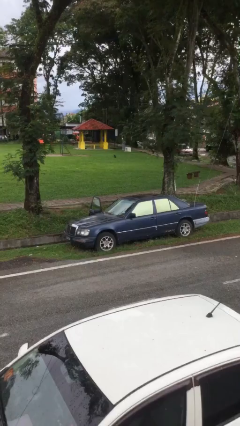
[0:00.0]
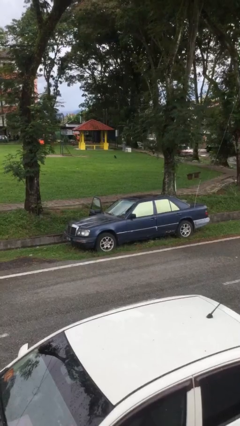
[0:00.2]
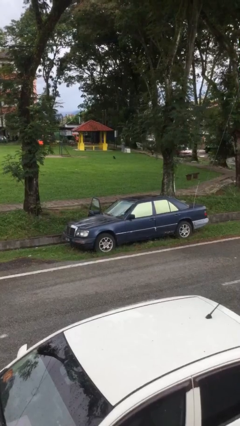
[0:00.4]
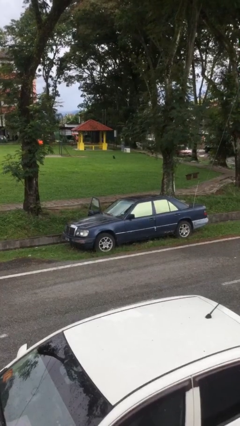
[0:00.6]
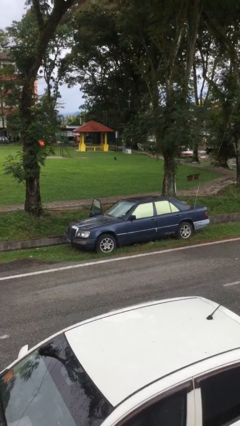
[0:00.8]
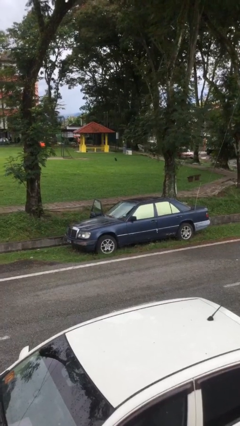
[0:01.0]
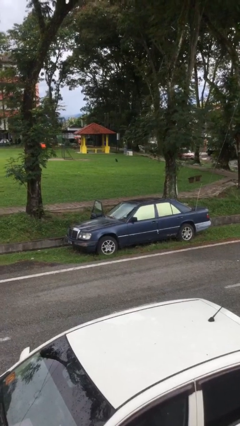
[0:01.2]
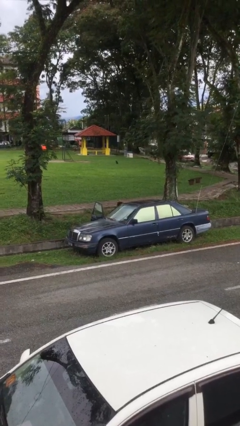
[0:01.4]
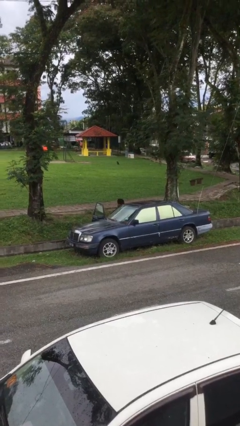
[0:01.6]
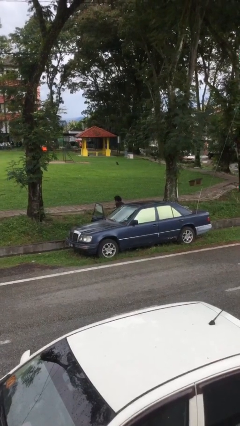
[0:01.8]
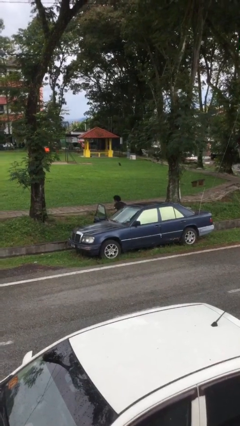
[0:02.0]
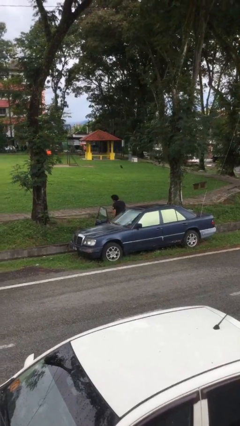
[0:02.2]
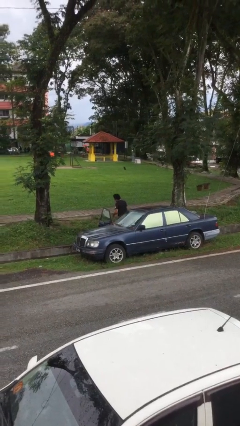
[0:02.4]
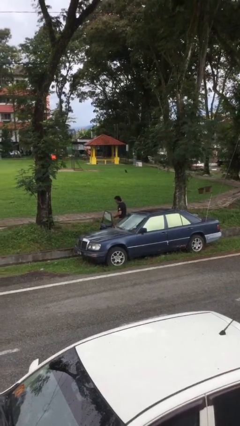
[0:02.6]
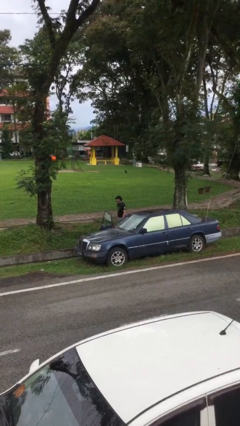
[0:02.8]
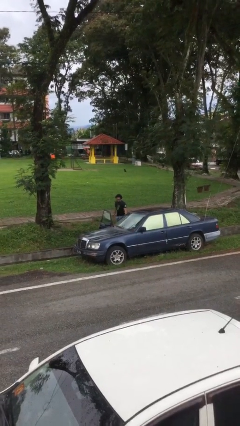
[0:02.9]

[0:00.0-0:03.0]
person exits car

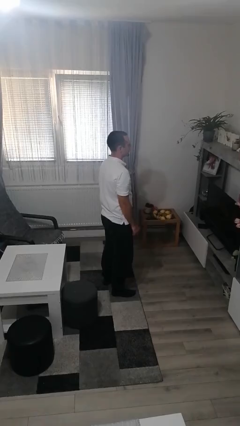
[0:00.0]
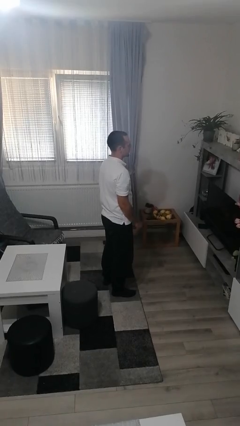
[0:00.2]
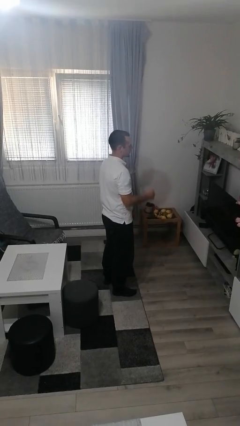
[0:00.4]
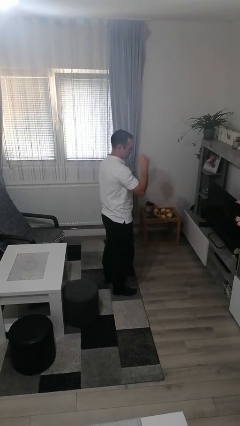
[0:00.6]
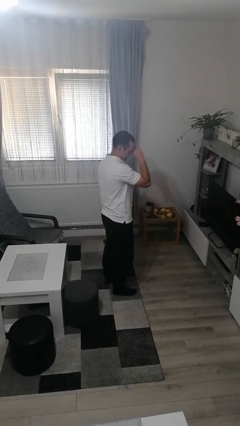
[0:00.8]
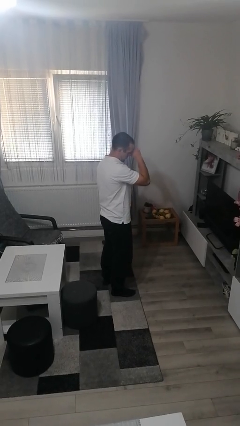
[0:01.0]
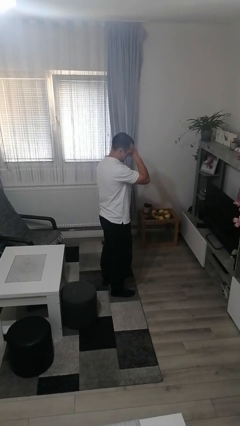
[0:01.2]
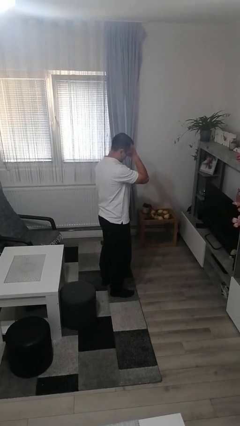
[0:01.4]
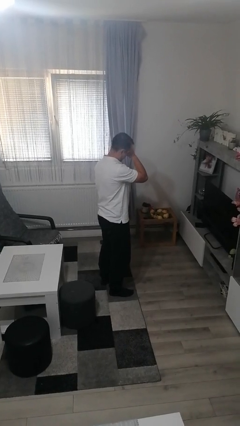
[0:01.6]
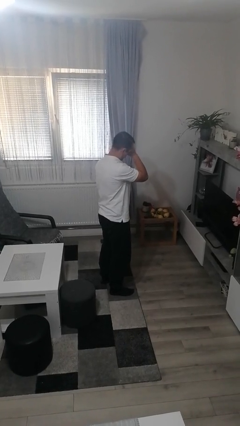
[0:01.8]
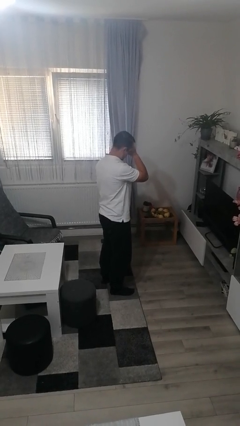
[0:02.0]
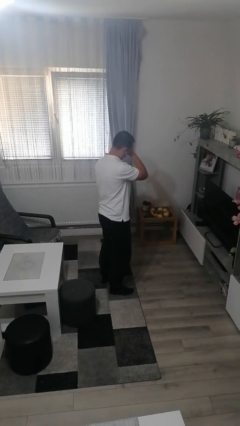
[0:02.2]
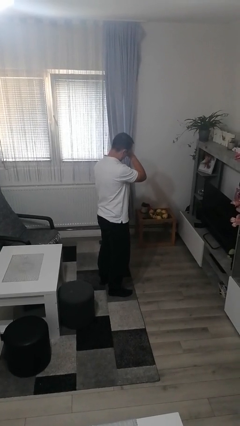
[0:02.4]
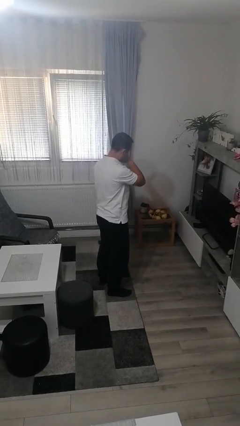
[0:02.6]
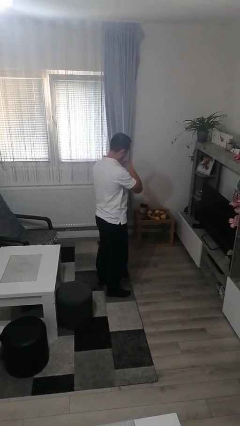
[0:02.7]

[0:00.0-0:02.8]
person rubs eyes

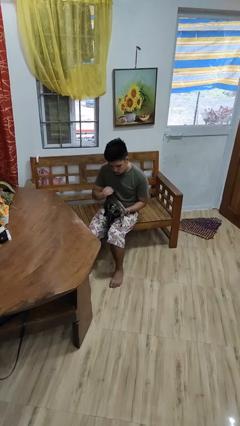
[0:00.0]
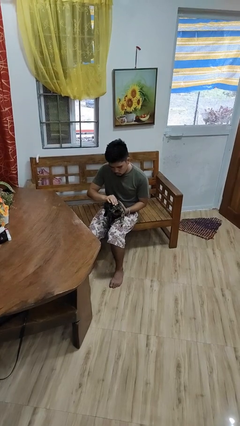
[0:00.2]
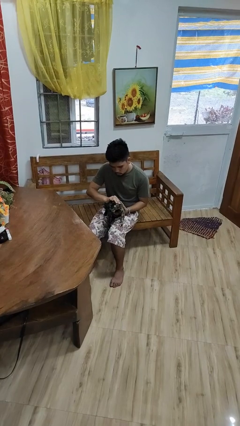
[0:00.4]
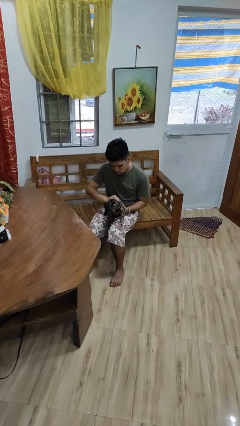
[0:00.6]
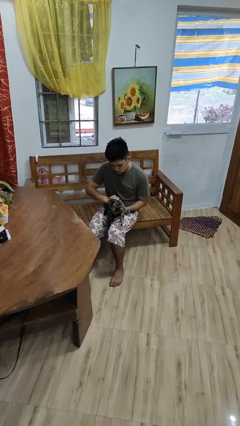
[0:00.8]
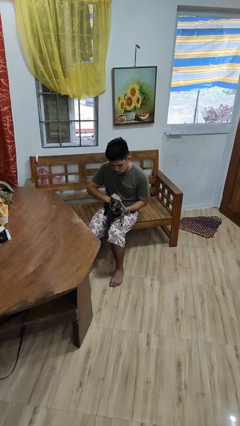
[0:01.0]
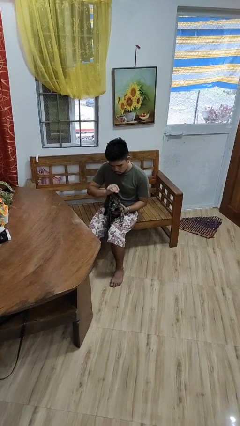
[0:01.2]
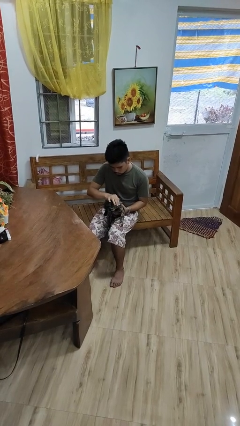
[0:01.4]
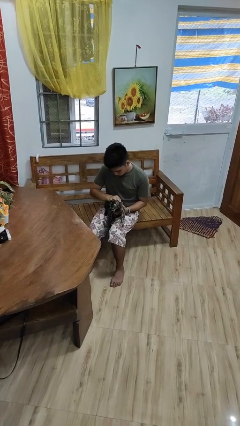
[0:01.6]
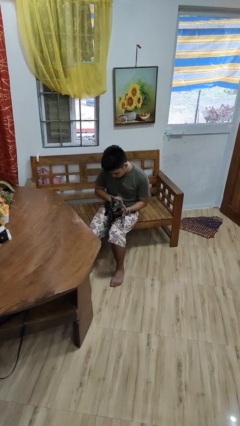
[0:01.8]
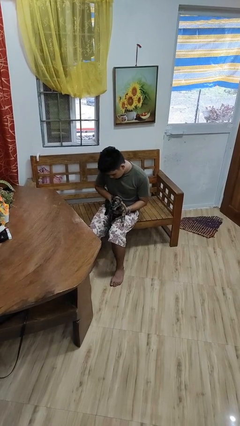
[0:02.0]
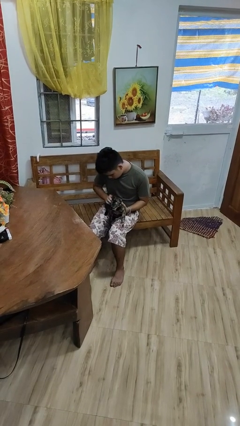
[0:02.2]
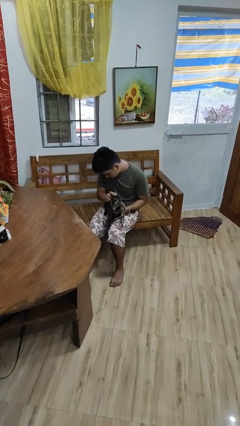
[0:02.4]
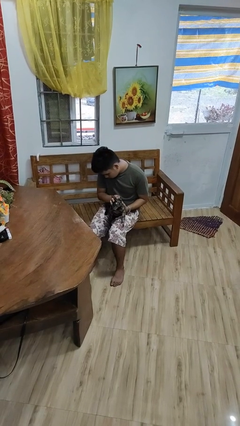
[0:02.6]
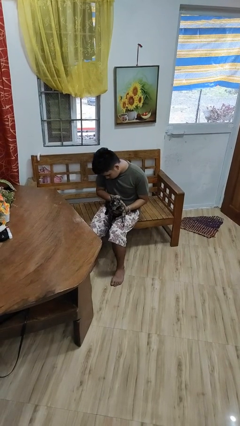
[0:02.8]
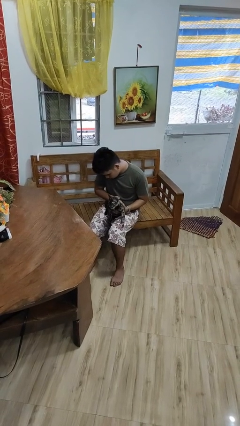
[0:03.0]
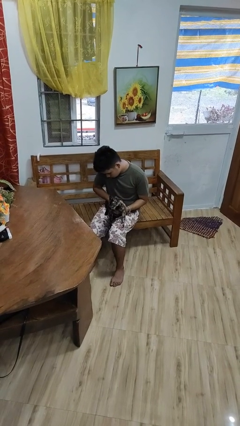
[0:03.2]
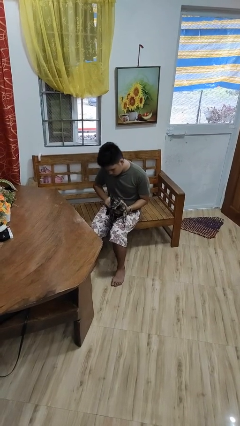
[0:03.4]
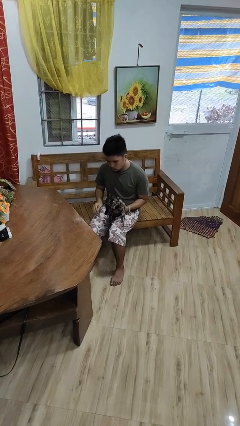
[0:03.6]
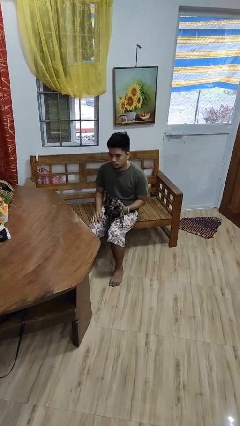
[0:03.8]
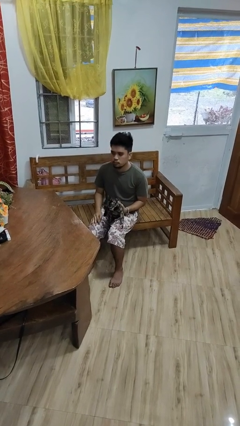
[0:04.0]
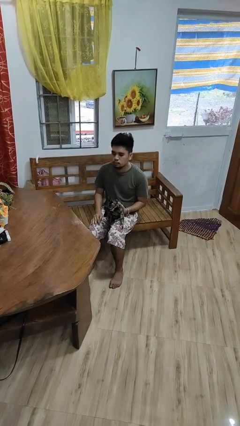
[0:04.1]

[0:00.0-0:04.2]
person pets cat

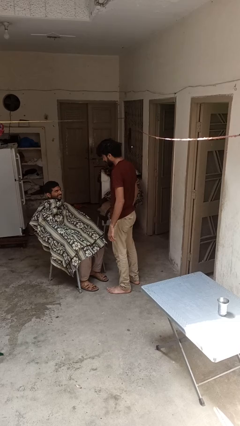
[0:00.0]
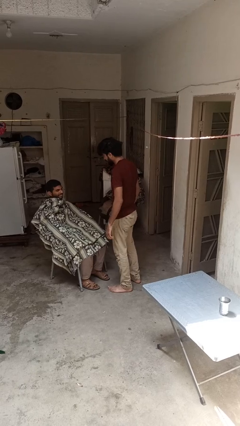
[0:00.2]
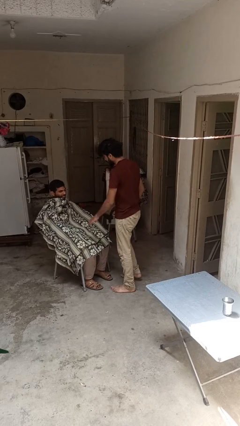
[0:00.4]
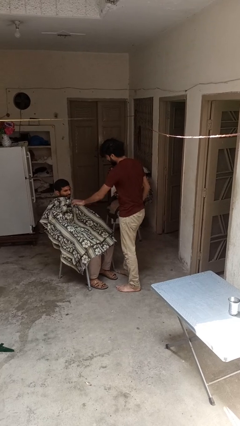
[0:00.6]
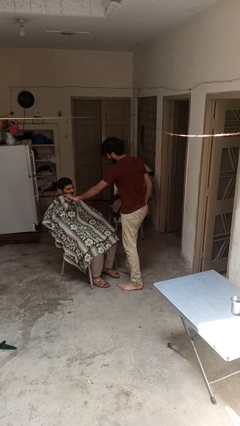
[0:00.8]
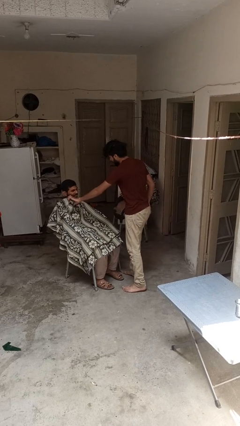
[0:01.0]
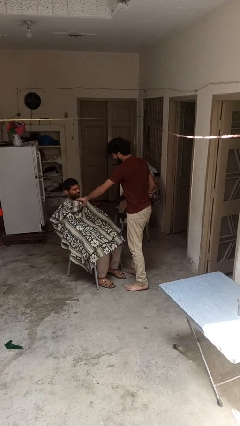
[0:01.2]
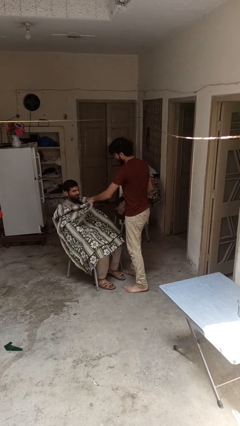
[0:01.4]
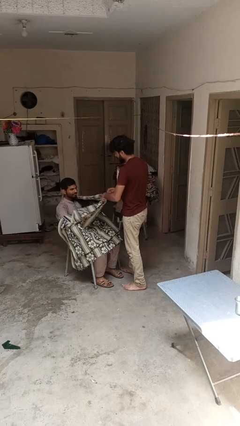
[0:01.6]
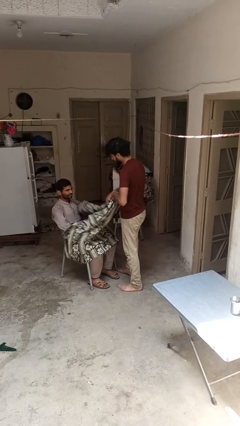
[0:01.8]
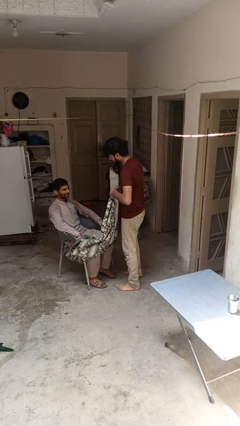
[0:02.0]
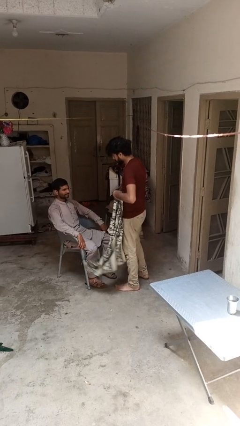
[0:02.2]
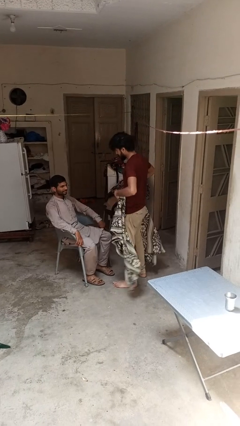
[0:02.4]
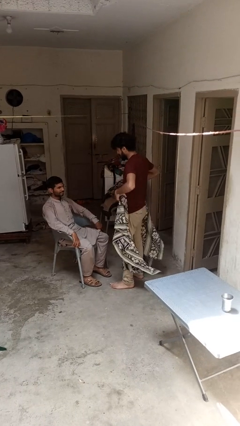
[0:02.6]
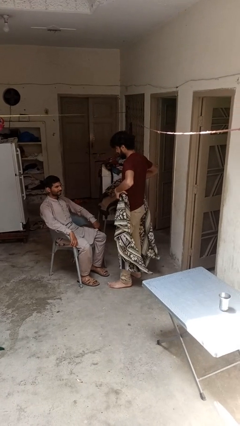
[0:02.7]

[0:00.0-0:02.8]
person uncovers friend with blanket

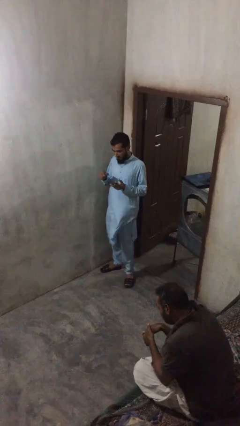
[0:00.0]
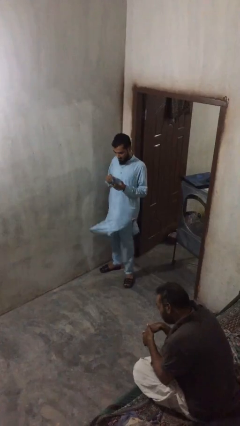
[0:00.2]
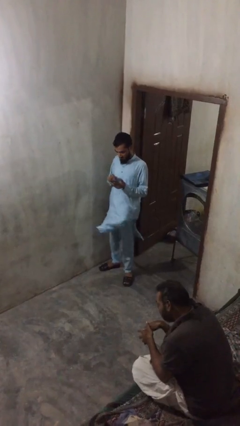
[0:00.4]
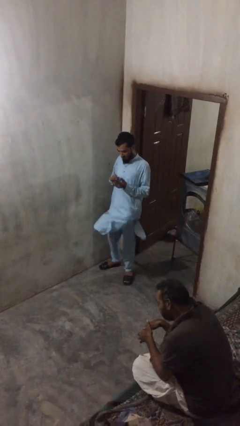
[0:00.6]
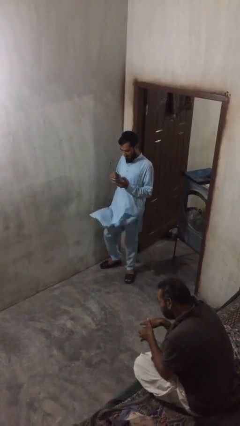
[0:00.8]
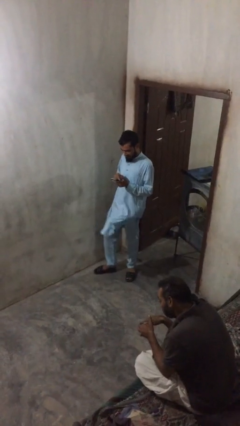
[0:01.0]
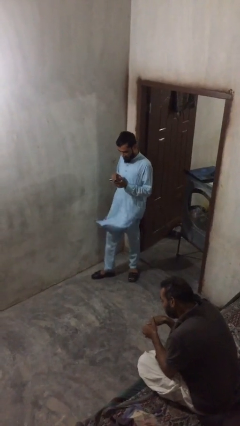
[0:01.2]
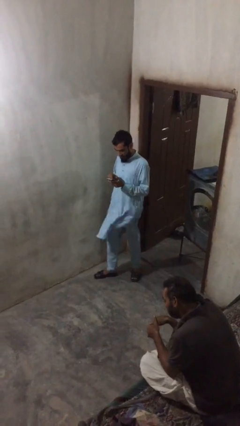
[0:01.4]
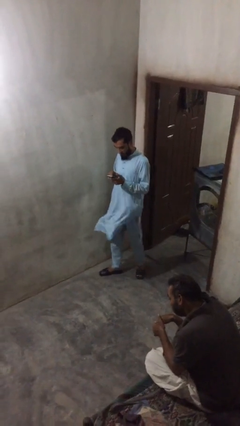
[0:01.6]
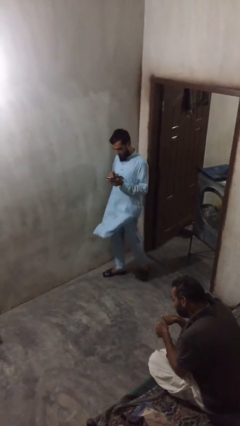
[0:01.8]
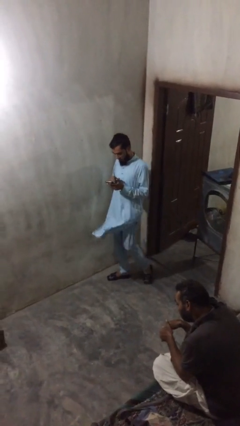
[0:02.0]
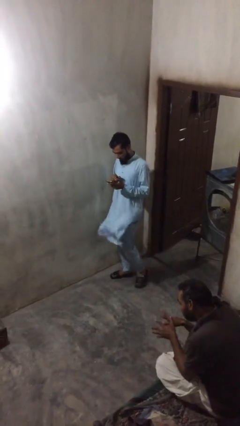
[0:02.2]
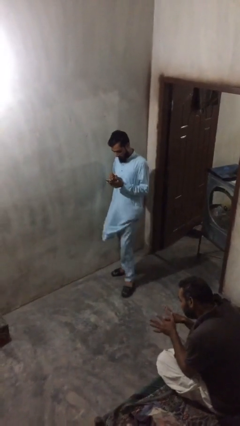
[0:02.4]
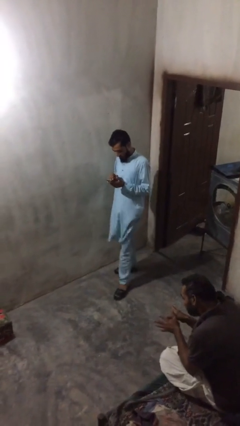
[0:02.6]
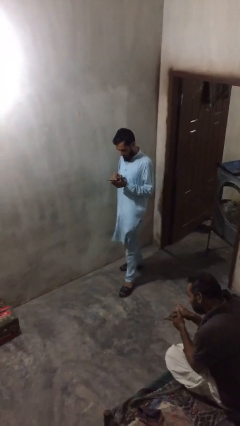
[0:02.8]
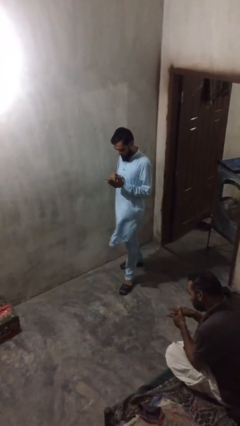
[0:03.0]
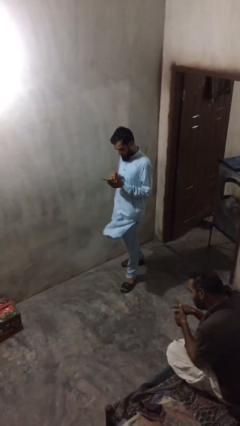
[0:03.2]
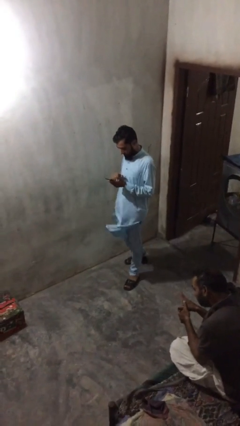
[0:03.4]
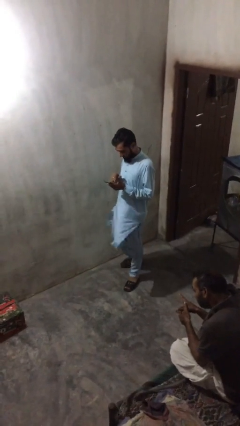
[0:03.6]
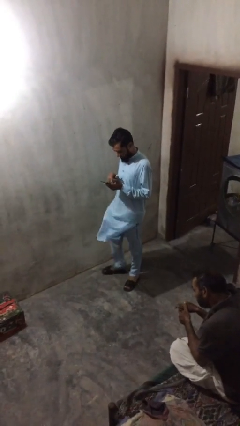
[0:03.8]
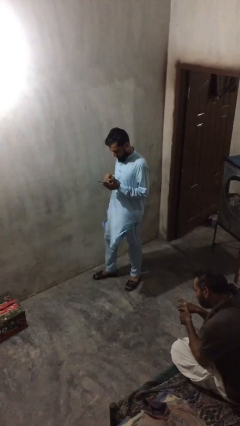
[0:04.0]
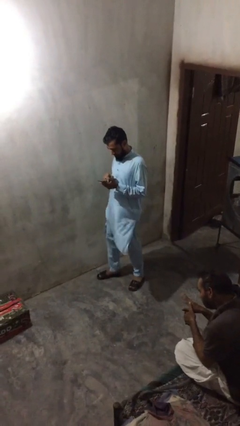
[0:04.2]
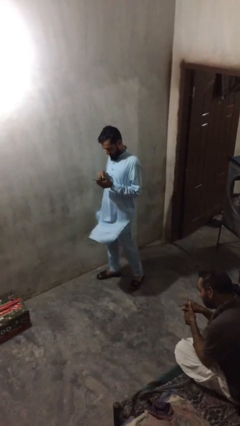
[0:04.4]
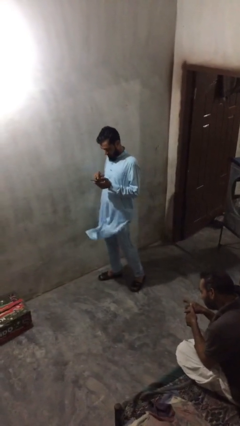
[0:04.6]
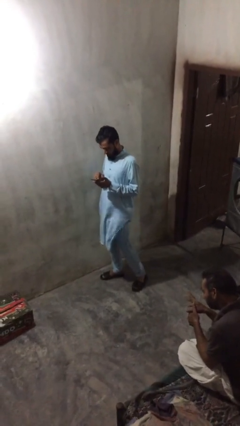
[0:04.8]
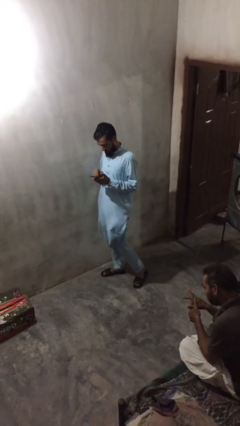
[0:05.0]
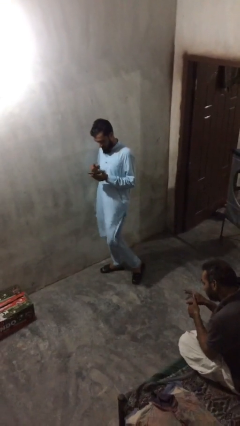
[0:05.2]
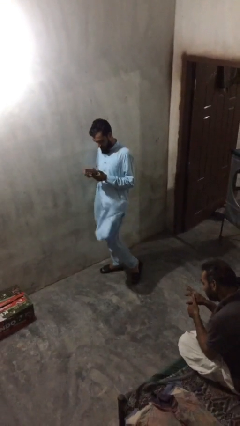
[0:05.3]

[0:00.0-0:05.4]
person texts on phone
